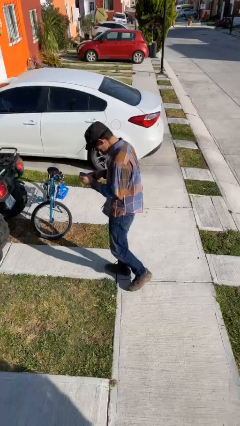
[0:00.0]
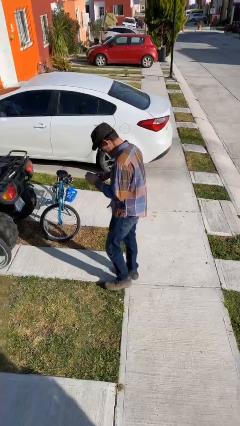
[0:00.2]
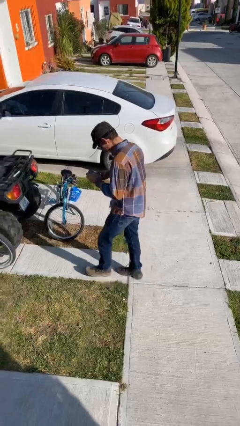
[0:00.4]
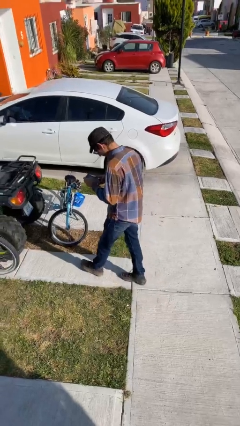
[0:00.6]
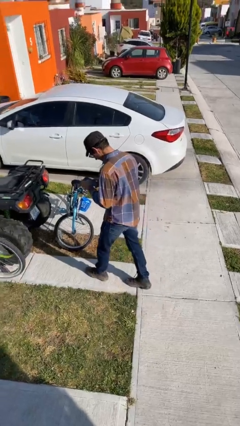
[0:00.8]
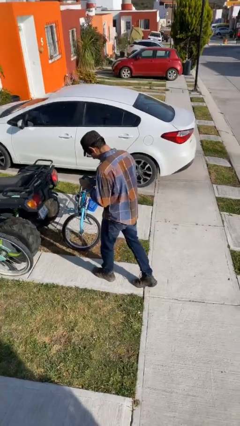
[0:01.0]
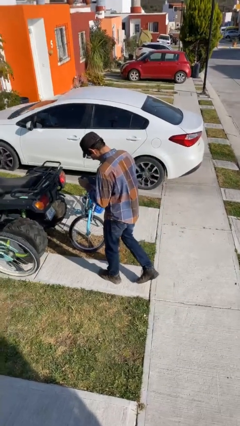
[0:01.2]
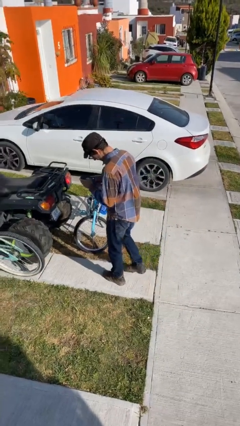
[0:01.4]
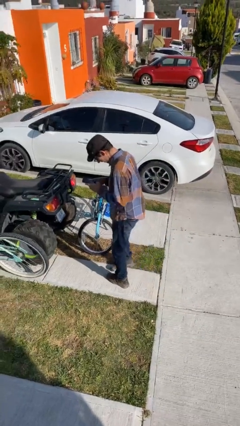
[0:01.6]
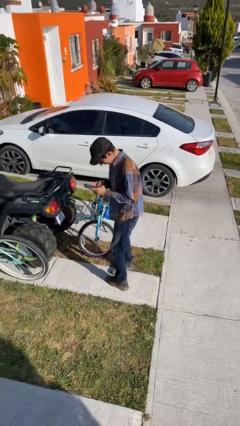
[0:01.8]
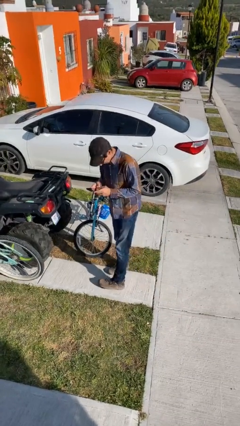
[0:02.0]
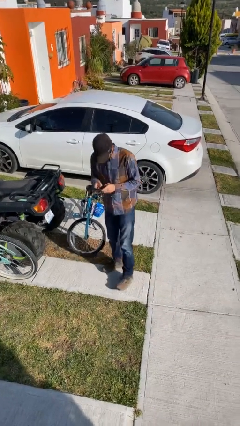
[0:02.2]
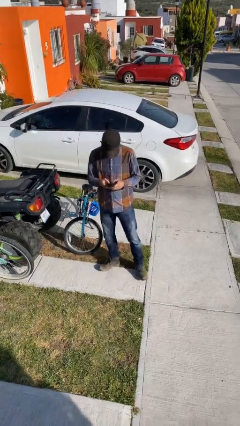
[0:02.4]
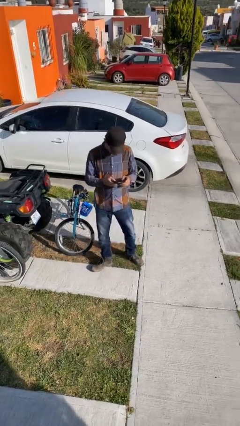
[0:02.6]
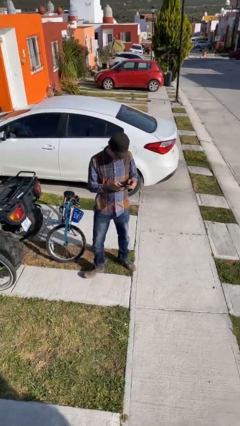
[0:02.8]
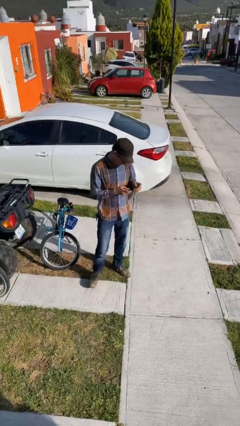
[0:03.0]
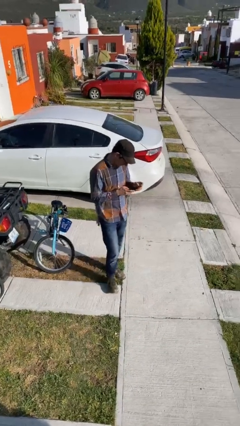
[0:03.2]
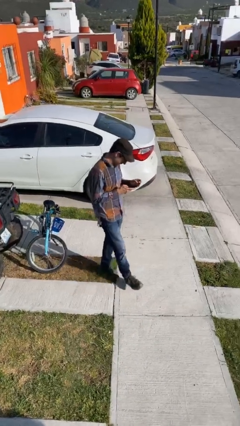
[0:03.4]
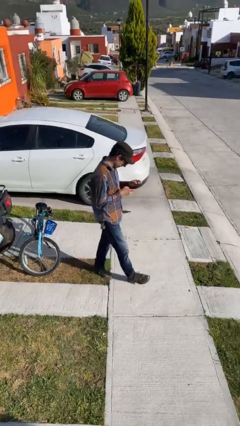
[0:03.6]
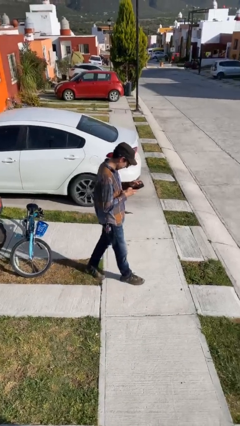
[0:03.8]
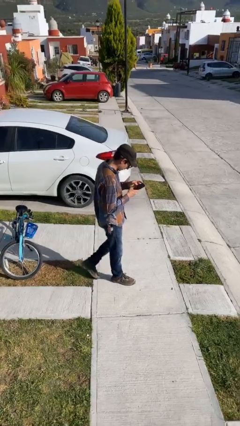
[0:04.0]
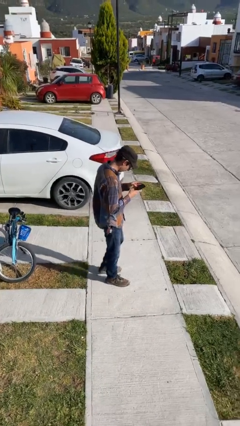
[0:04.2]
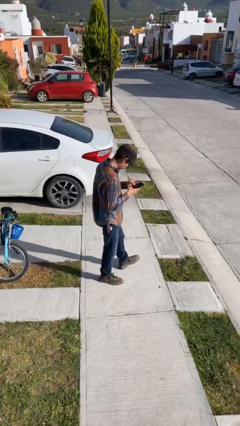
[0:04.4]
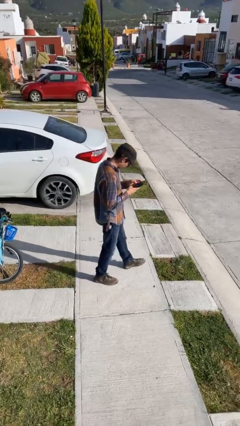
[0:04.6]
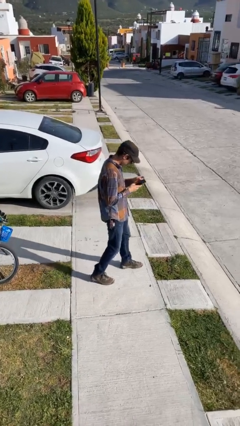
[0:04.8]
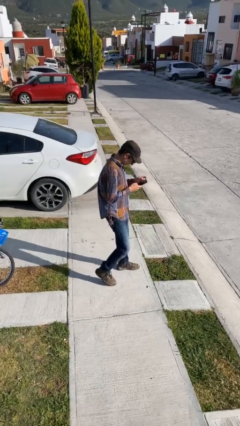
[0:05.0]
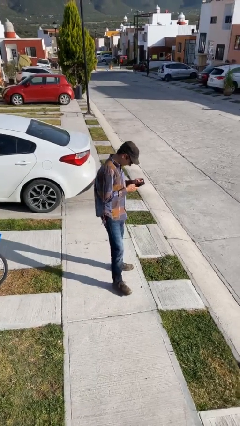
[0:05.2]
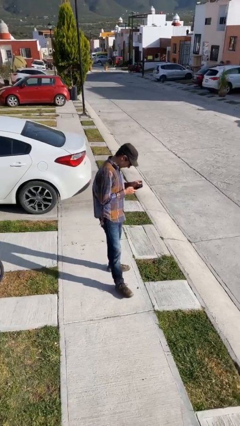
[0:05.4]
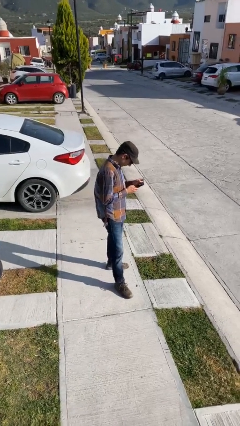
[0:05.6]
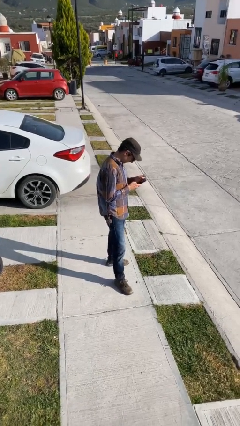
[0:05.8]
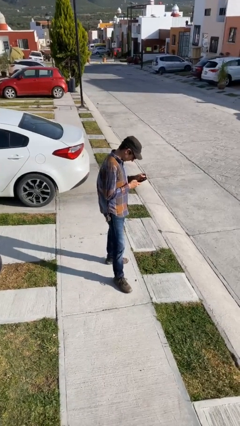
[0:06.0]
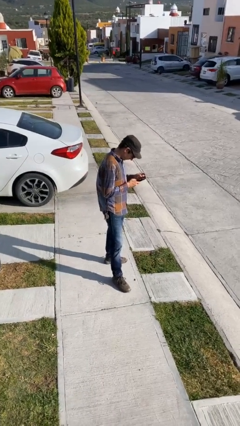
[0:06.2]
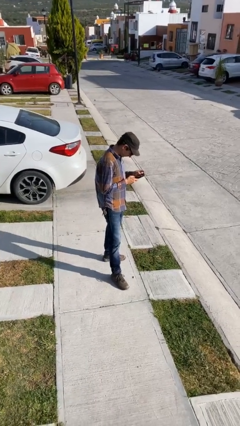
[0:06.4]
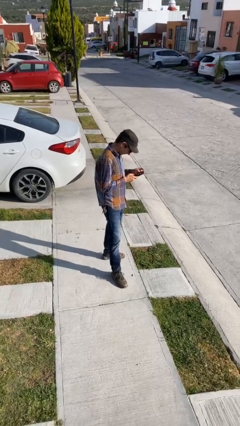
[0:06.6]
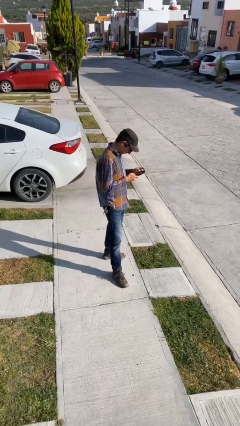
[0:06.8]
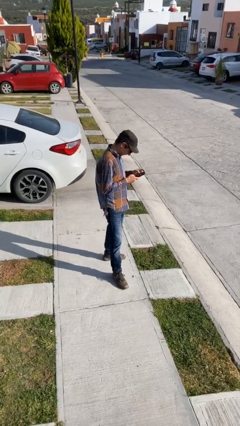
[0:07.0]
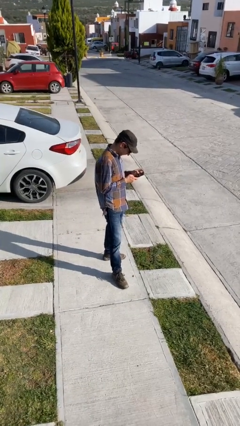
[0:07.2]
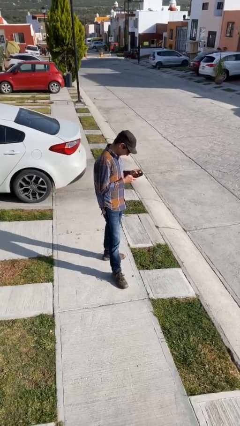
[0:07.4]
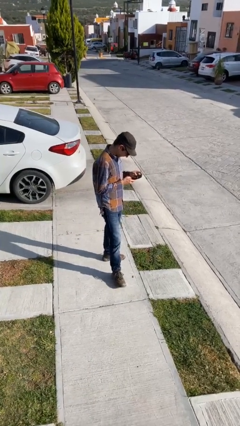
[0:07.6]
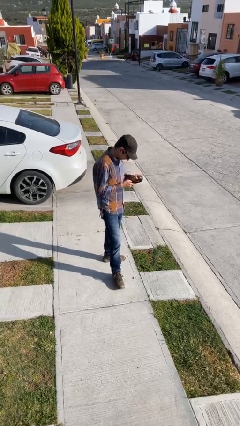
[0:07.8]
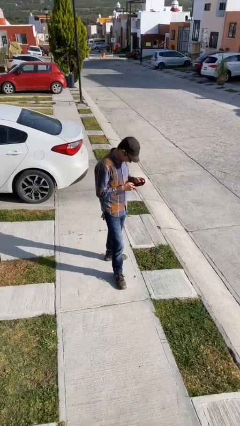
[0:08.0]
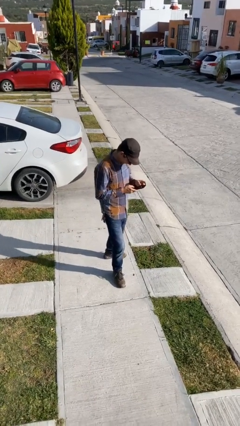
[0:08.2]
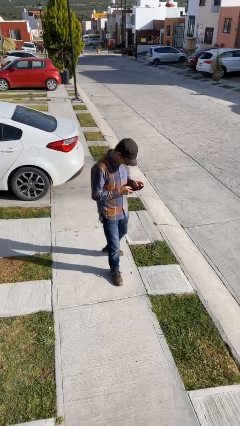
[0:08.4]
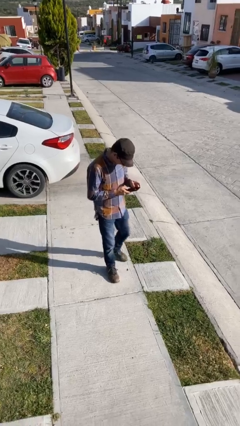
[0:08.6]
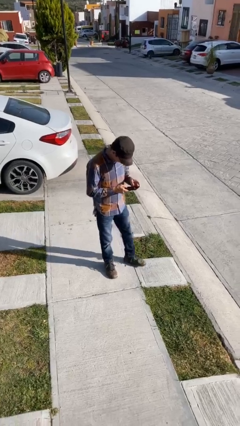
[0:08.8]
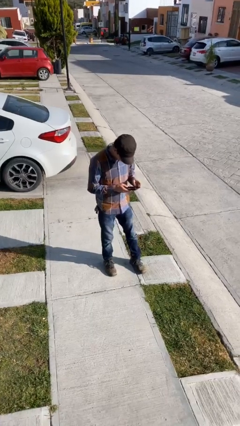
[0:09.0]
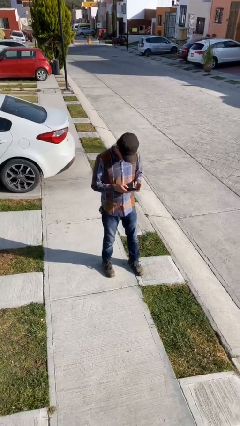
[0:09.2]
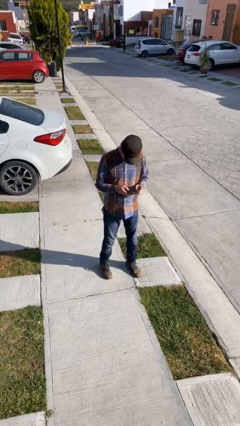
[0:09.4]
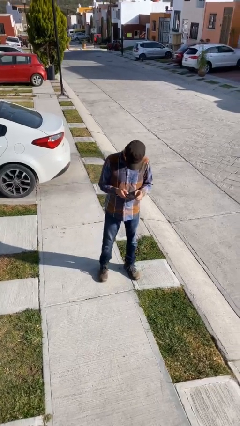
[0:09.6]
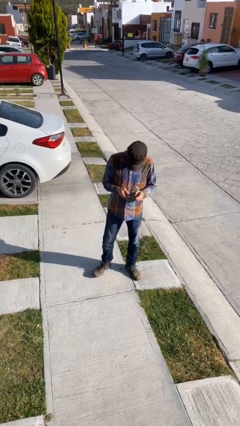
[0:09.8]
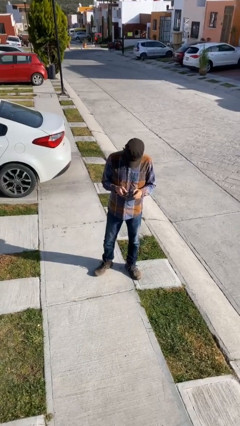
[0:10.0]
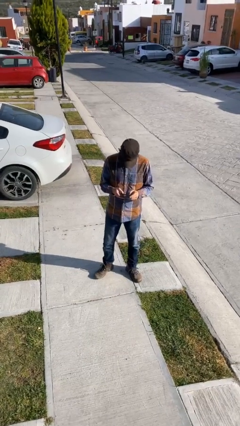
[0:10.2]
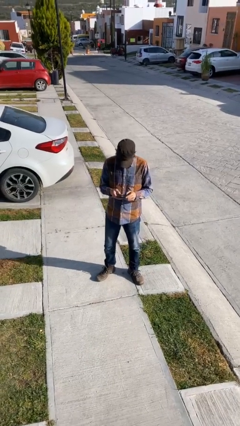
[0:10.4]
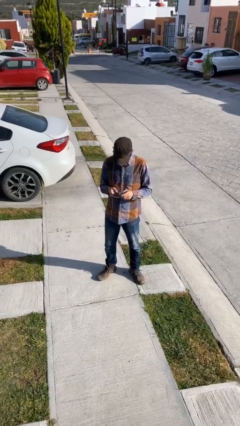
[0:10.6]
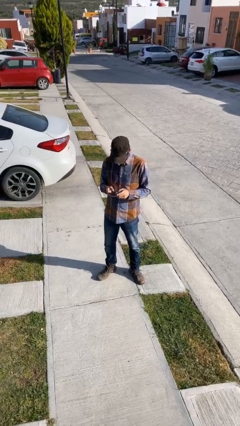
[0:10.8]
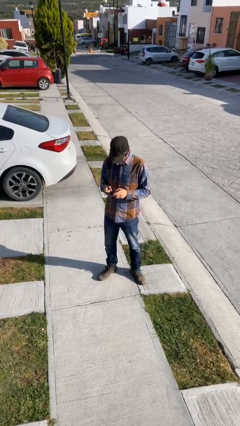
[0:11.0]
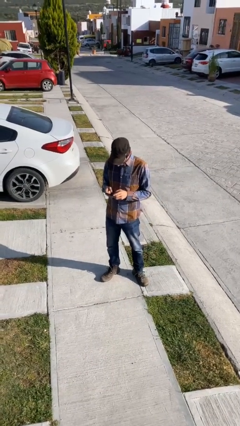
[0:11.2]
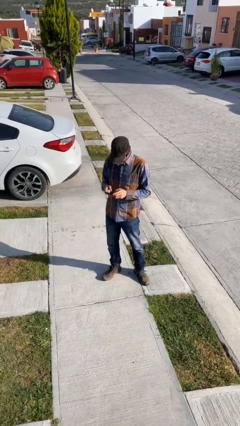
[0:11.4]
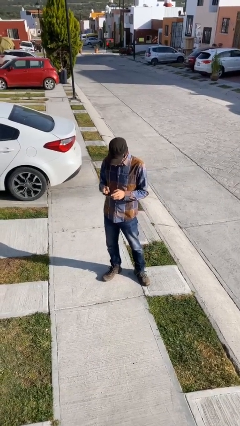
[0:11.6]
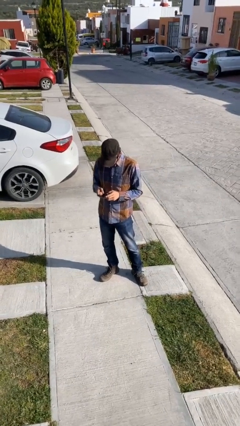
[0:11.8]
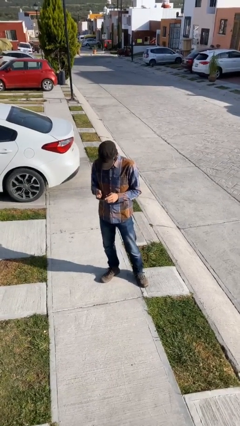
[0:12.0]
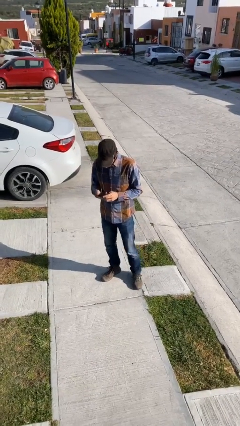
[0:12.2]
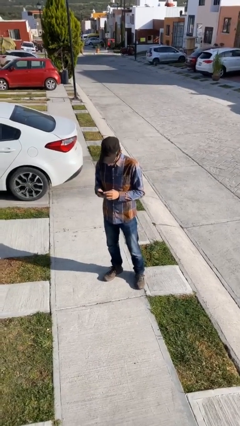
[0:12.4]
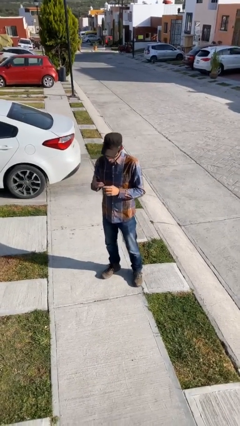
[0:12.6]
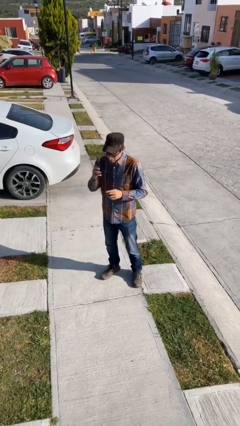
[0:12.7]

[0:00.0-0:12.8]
person texts on phone

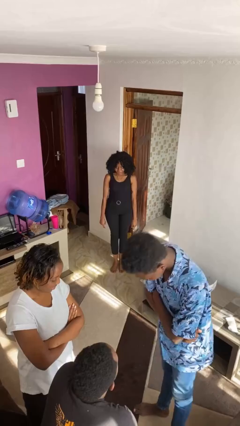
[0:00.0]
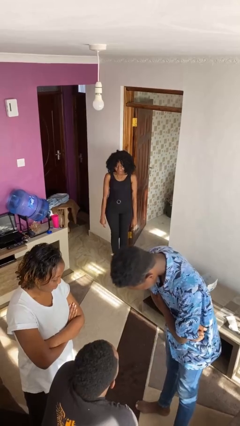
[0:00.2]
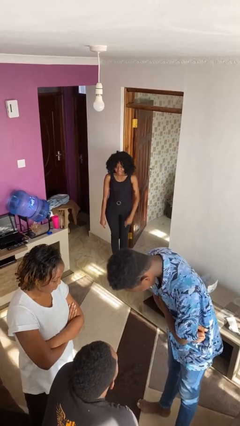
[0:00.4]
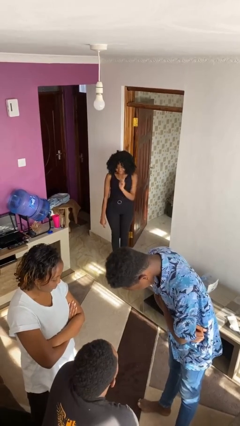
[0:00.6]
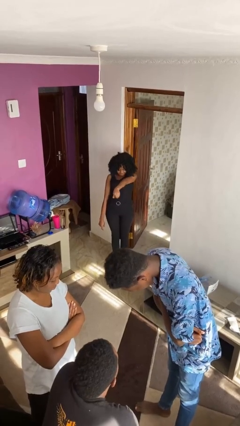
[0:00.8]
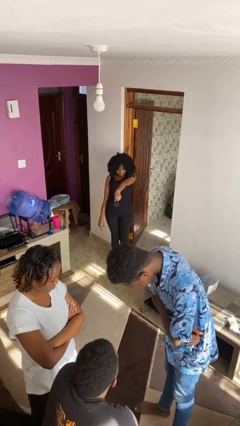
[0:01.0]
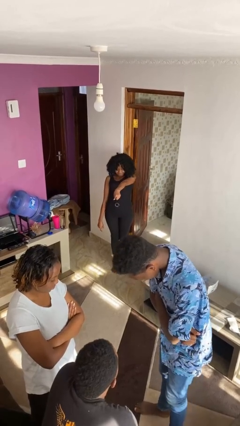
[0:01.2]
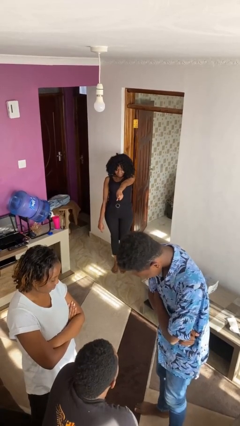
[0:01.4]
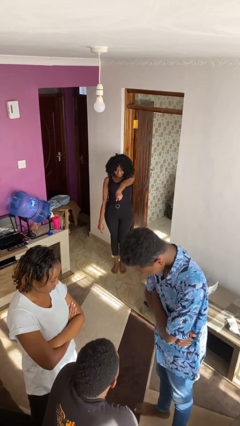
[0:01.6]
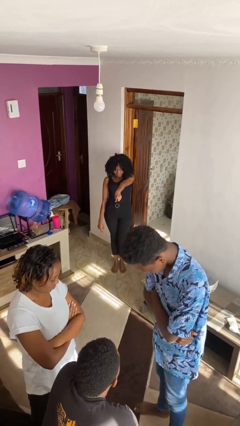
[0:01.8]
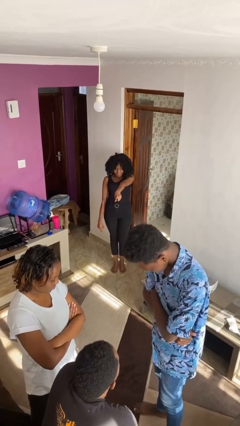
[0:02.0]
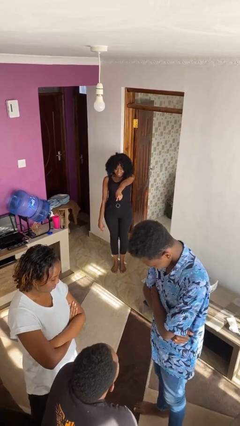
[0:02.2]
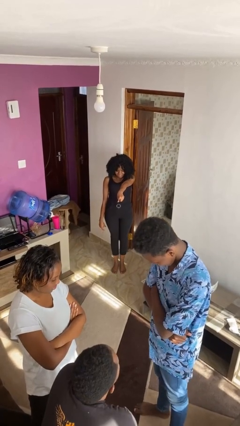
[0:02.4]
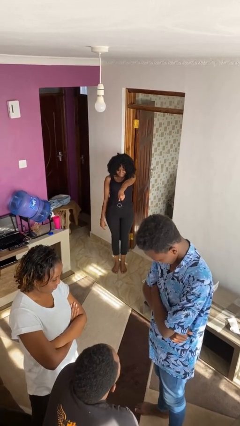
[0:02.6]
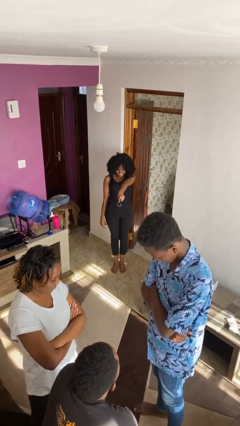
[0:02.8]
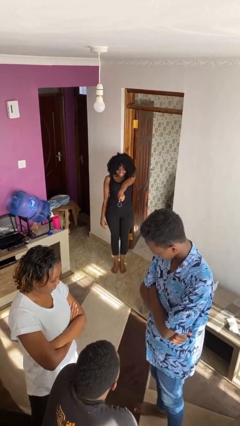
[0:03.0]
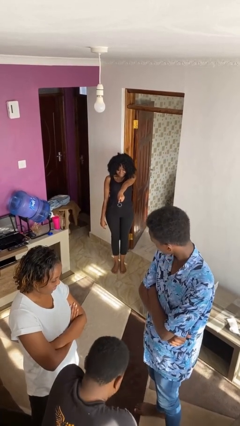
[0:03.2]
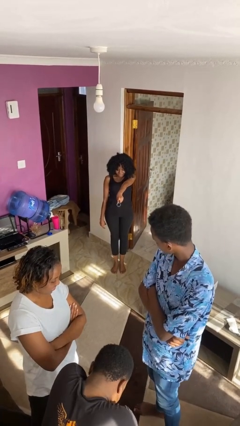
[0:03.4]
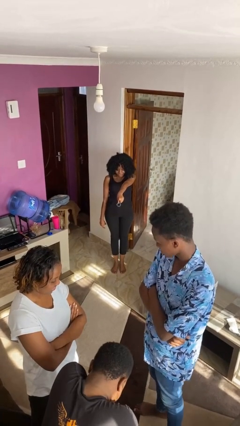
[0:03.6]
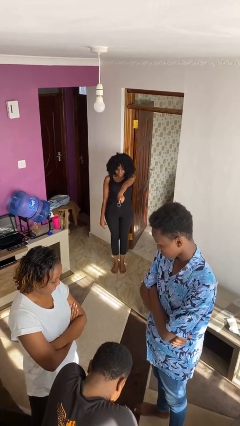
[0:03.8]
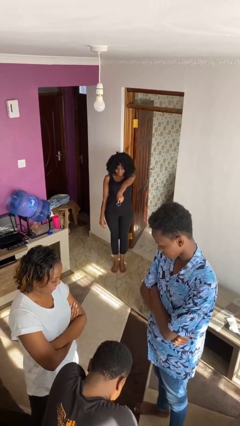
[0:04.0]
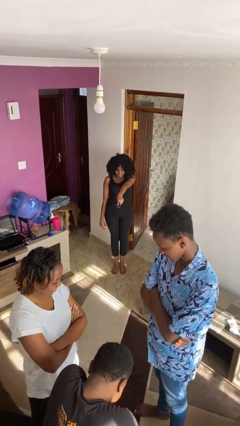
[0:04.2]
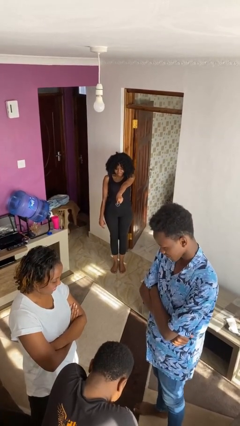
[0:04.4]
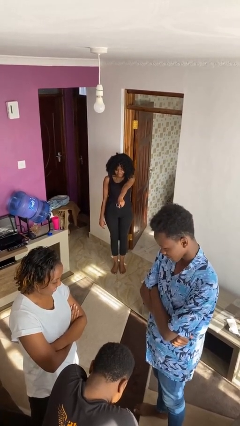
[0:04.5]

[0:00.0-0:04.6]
person points at person

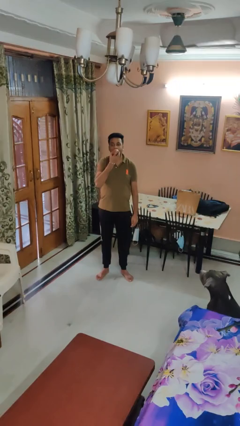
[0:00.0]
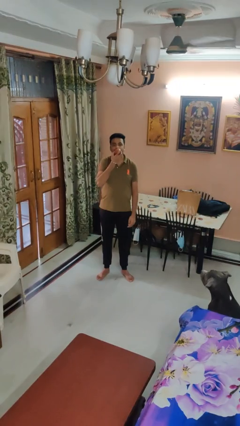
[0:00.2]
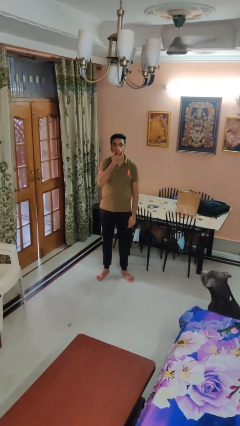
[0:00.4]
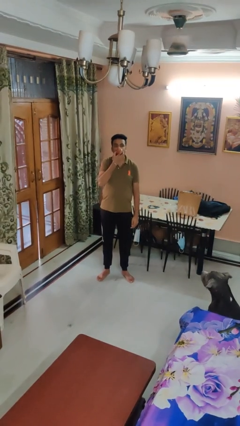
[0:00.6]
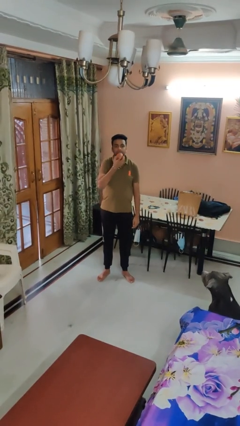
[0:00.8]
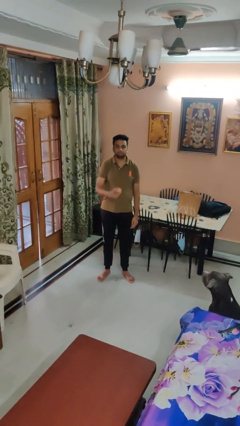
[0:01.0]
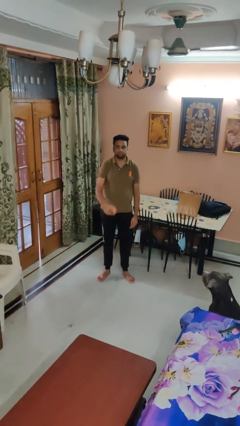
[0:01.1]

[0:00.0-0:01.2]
person eats apple
